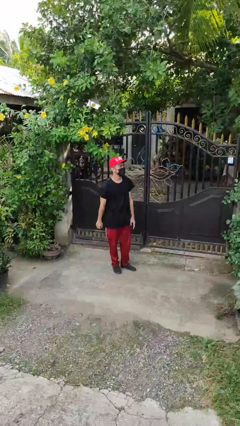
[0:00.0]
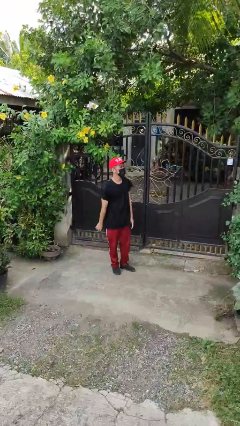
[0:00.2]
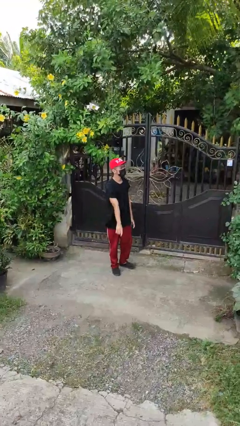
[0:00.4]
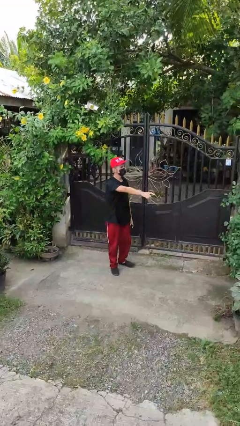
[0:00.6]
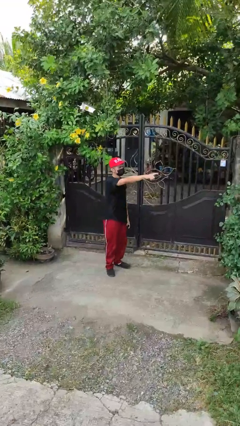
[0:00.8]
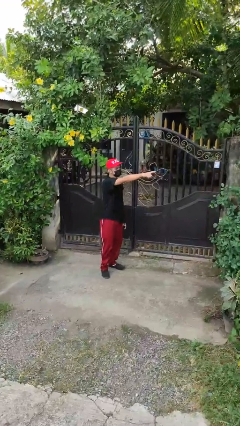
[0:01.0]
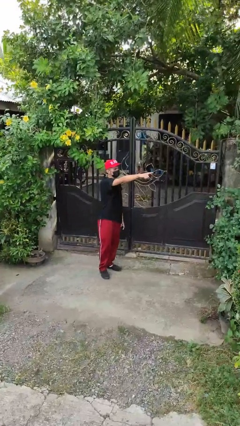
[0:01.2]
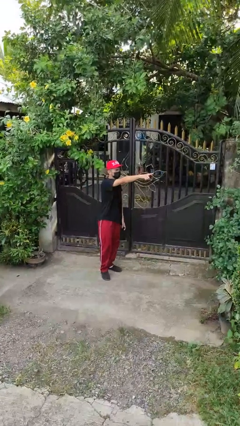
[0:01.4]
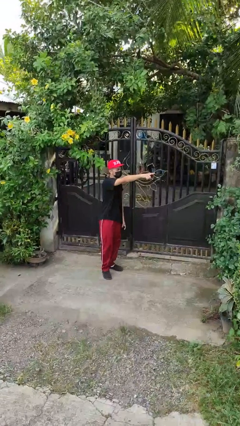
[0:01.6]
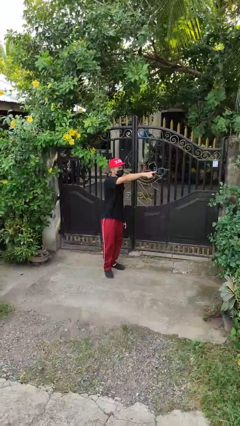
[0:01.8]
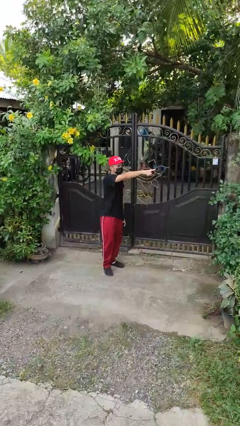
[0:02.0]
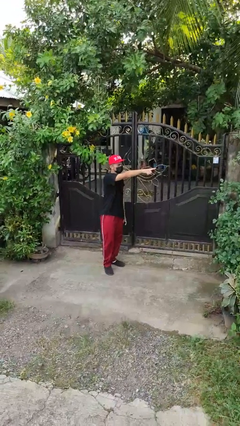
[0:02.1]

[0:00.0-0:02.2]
person points at person

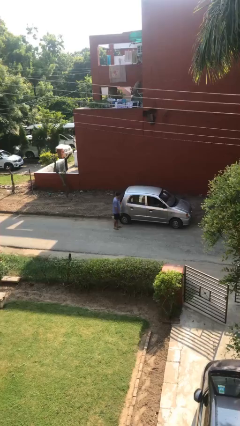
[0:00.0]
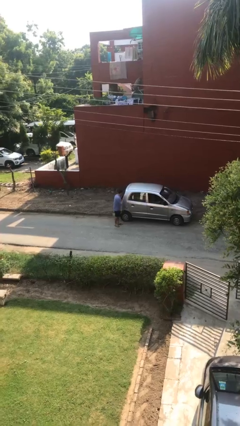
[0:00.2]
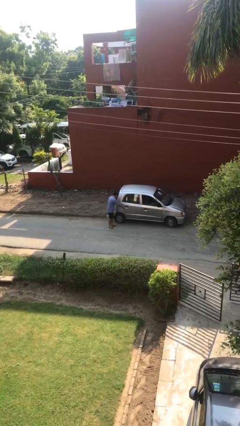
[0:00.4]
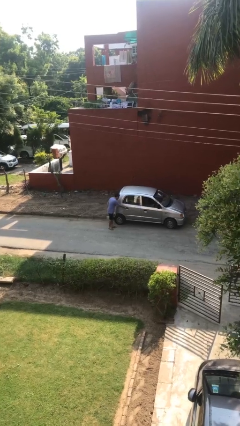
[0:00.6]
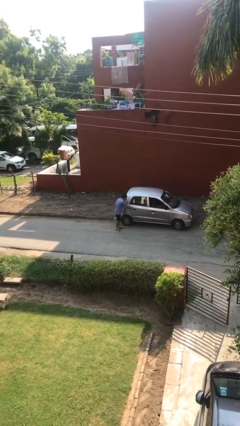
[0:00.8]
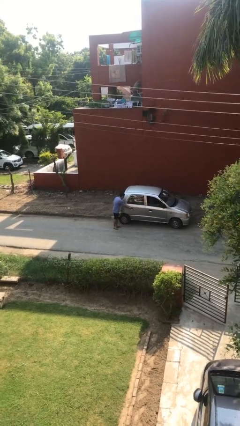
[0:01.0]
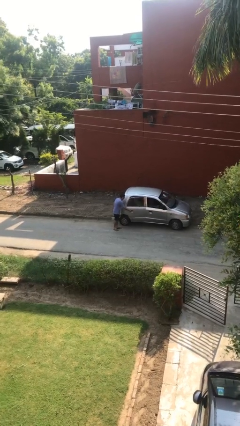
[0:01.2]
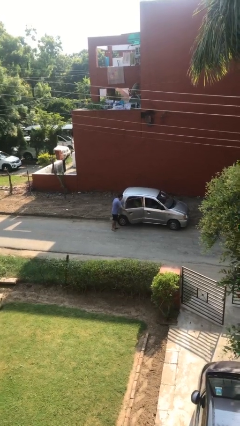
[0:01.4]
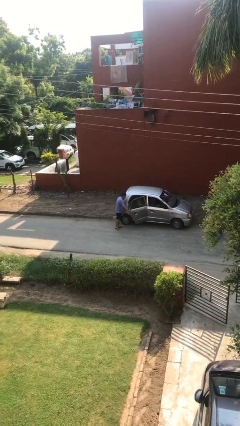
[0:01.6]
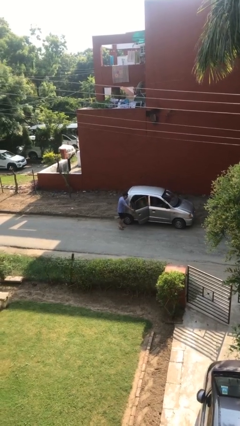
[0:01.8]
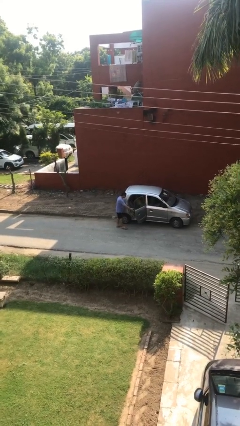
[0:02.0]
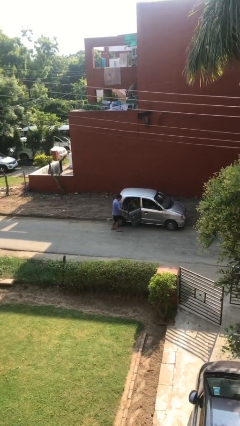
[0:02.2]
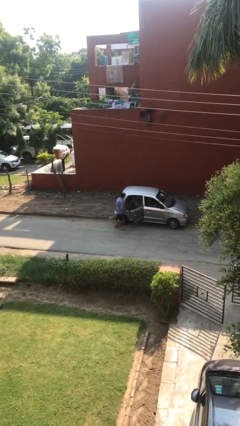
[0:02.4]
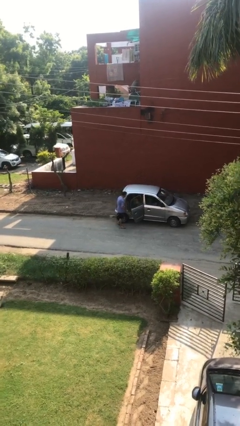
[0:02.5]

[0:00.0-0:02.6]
person opens car door

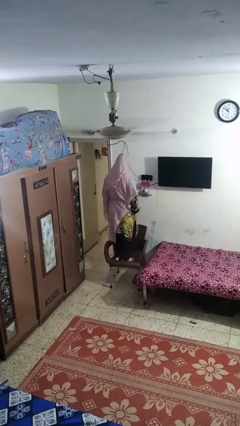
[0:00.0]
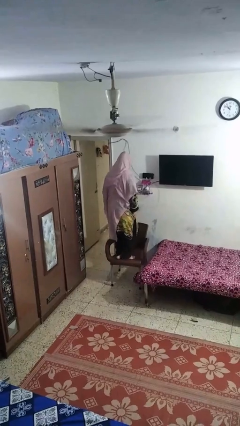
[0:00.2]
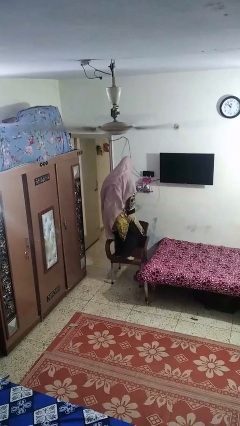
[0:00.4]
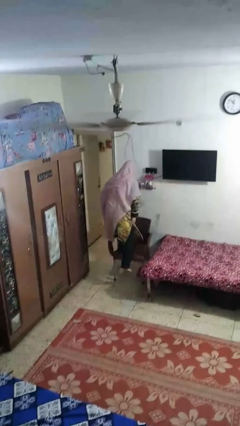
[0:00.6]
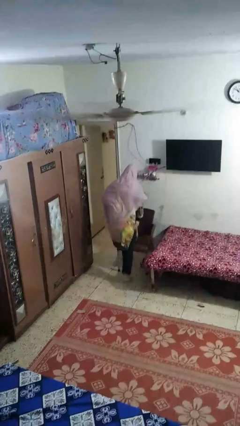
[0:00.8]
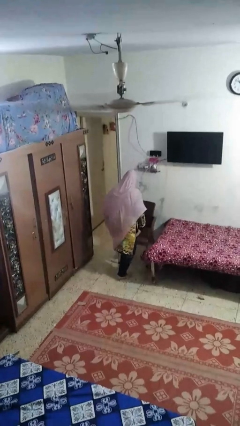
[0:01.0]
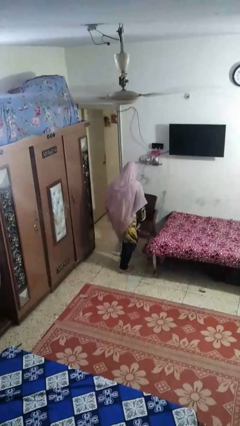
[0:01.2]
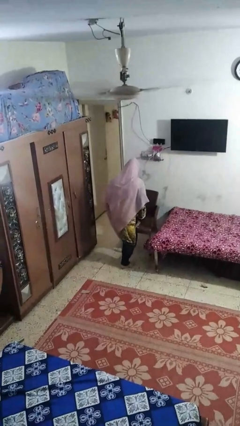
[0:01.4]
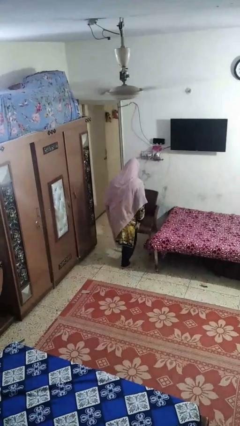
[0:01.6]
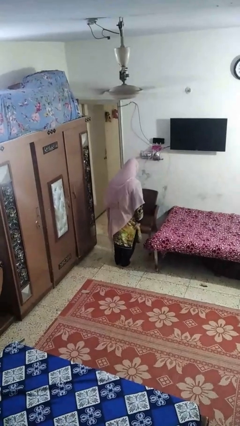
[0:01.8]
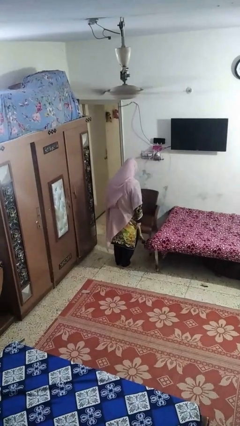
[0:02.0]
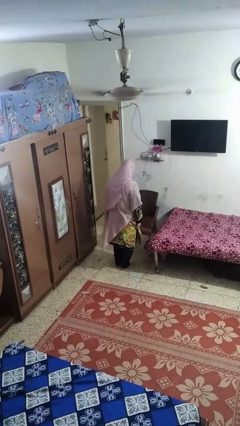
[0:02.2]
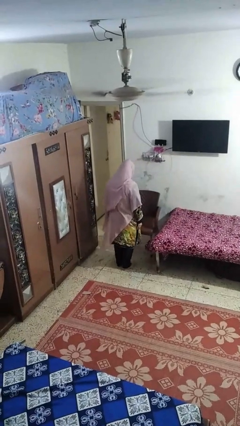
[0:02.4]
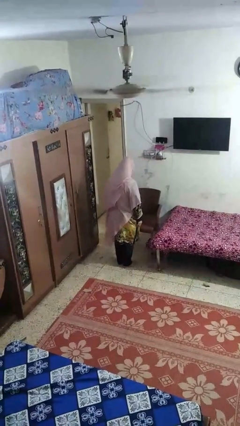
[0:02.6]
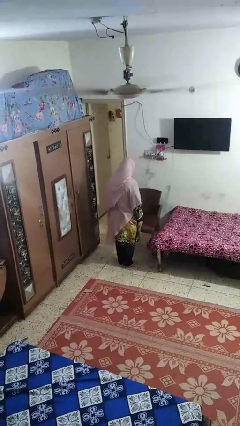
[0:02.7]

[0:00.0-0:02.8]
person climbs off chair

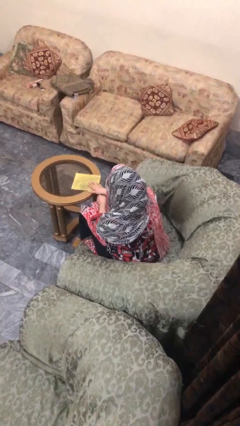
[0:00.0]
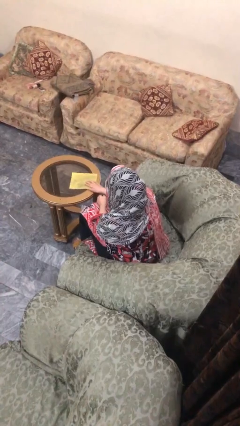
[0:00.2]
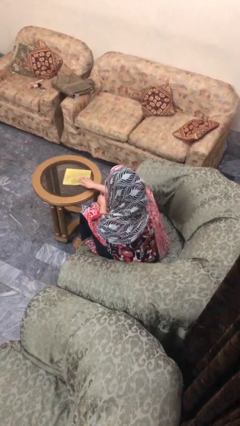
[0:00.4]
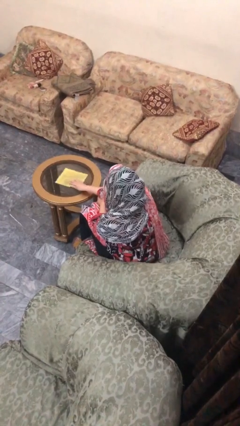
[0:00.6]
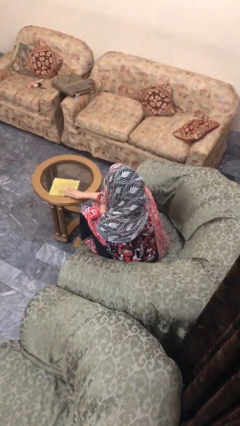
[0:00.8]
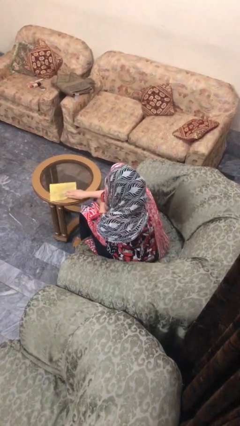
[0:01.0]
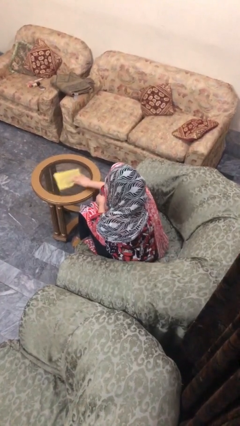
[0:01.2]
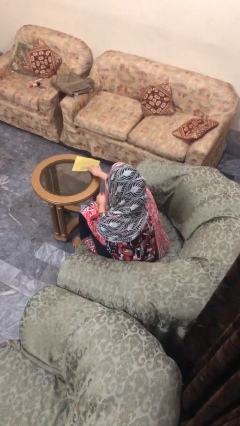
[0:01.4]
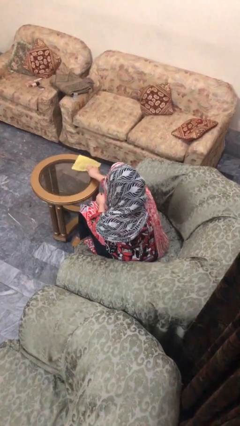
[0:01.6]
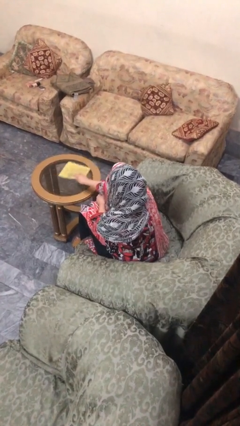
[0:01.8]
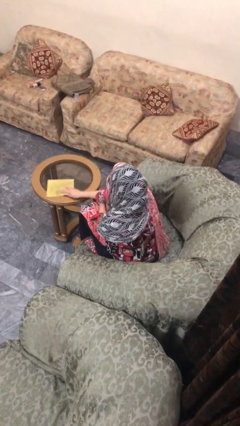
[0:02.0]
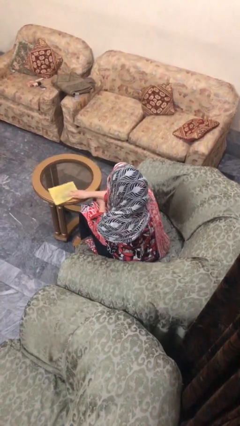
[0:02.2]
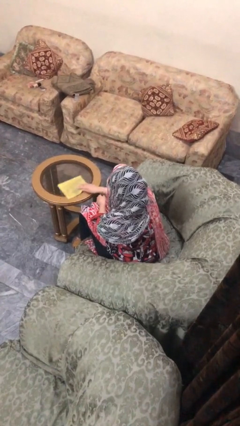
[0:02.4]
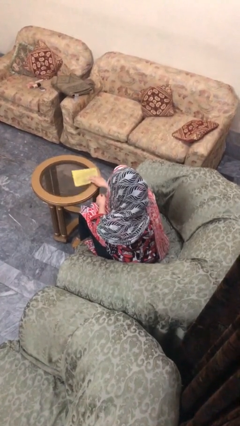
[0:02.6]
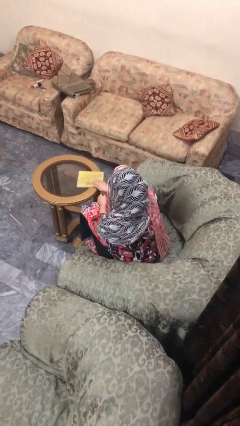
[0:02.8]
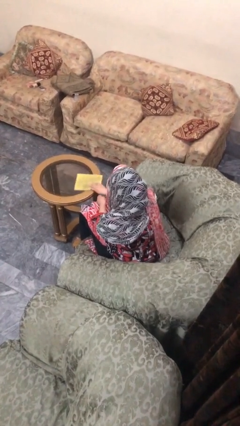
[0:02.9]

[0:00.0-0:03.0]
person cleans table with rag

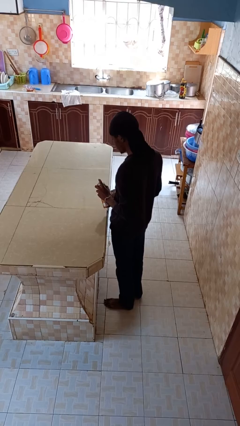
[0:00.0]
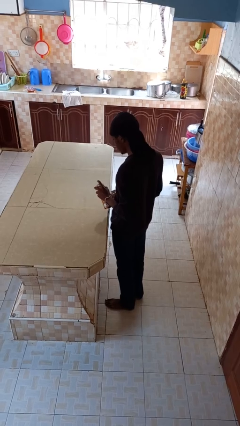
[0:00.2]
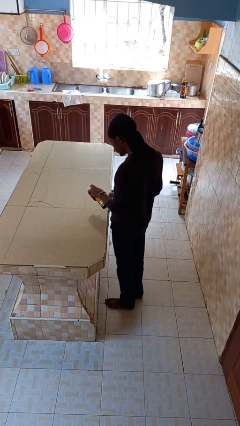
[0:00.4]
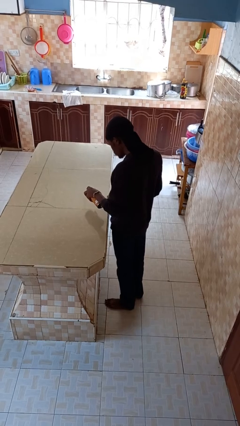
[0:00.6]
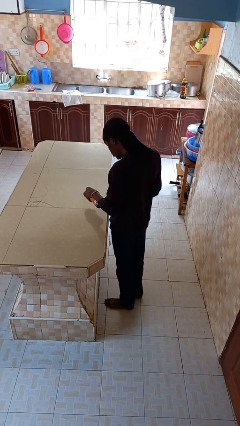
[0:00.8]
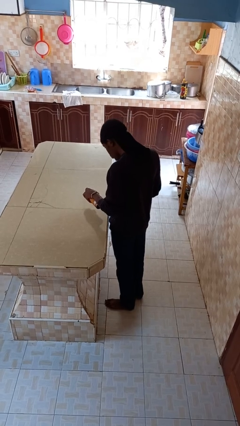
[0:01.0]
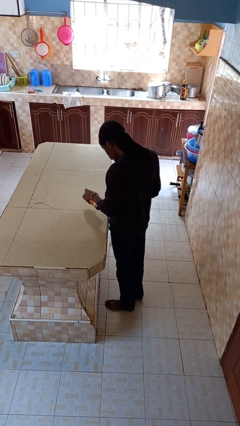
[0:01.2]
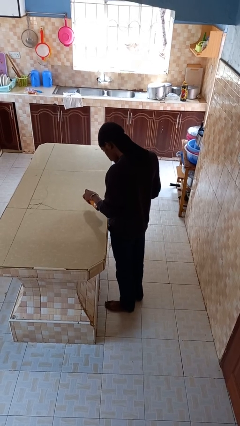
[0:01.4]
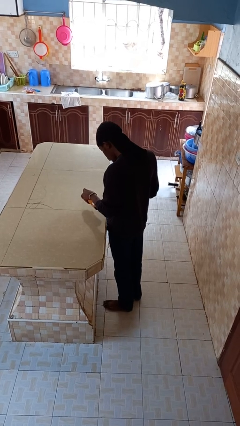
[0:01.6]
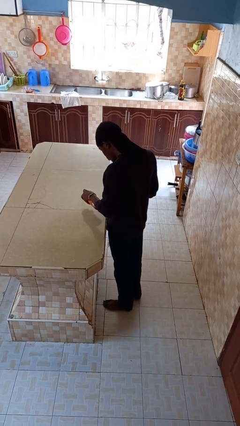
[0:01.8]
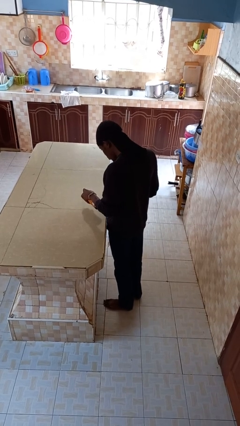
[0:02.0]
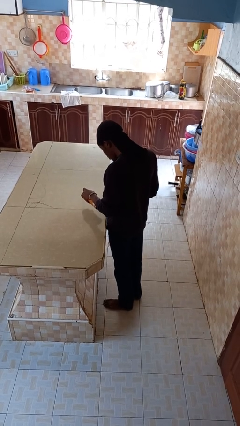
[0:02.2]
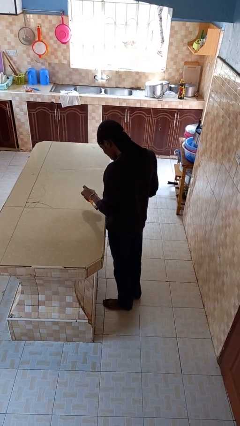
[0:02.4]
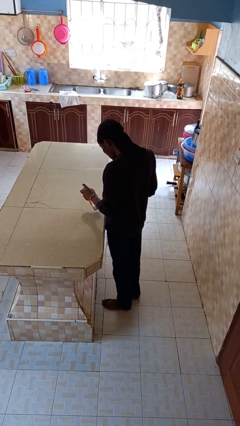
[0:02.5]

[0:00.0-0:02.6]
person sprays from bottle

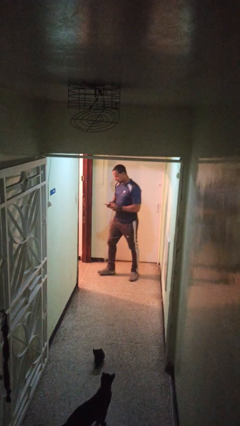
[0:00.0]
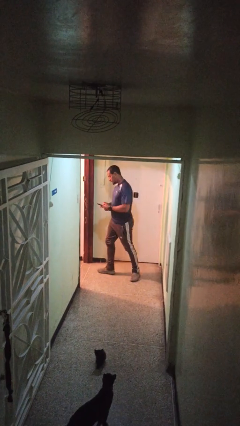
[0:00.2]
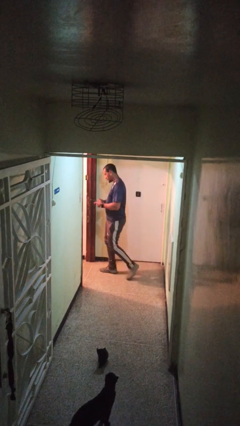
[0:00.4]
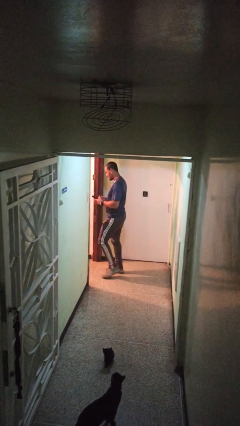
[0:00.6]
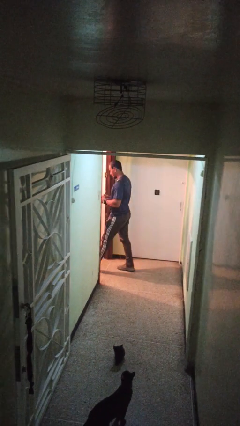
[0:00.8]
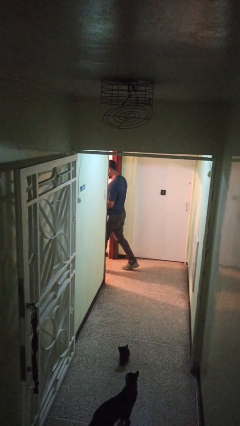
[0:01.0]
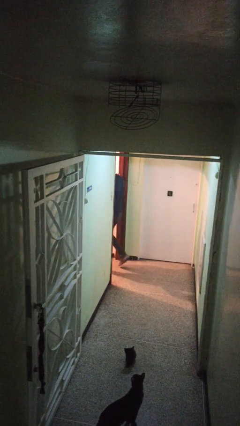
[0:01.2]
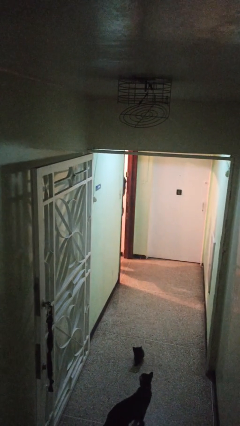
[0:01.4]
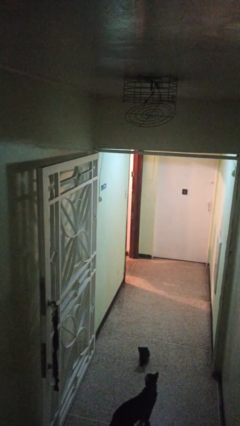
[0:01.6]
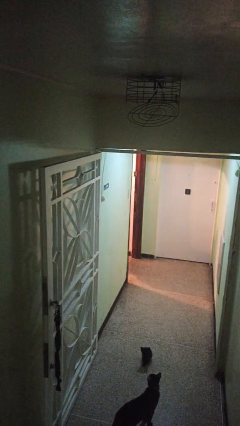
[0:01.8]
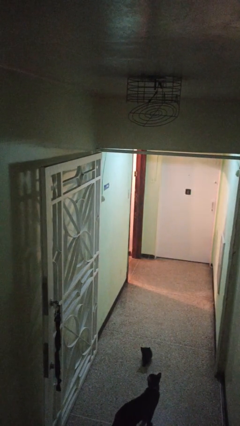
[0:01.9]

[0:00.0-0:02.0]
person exits scene through structure

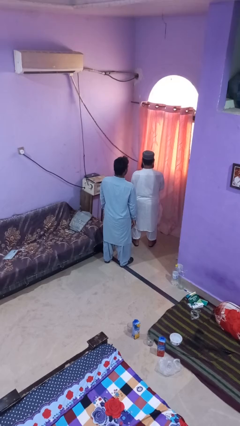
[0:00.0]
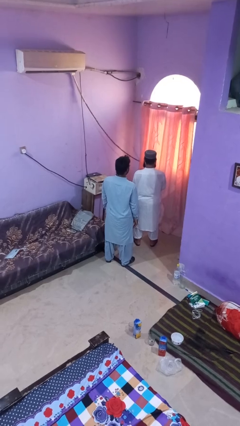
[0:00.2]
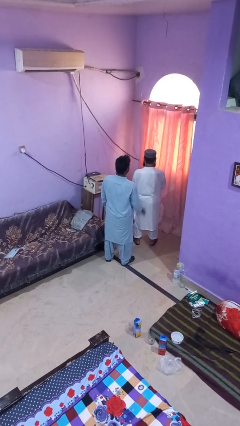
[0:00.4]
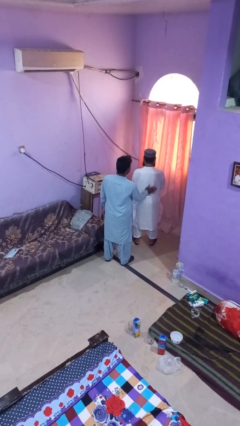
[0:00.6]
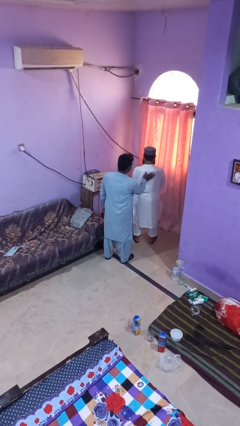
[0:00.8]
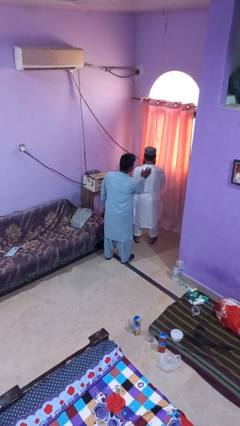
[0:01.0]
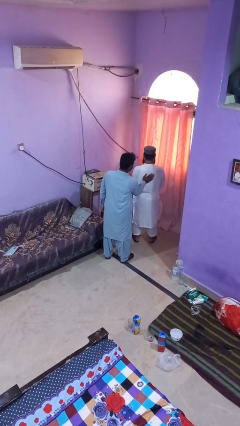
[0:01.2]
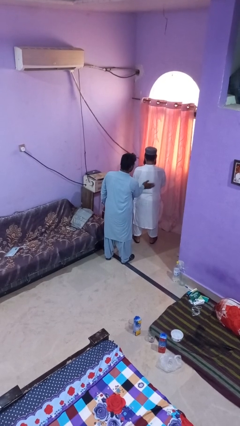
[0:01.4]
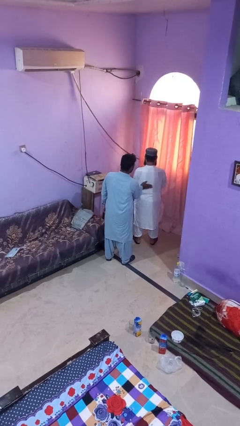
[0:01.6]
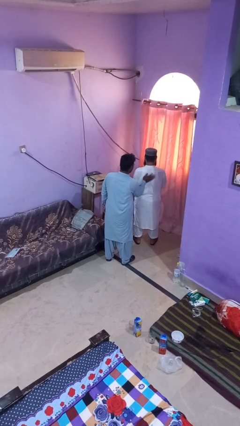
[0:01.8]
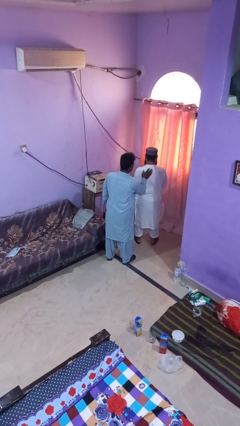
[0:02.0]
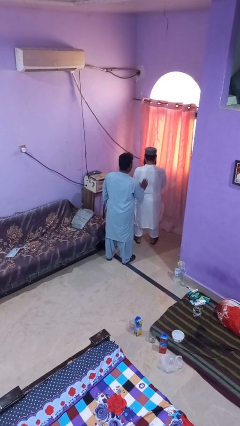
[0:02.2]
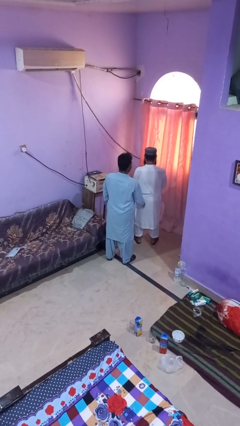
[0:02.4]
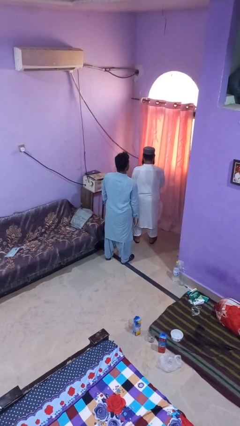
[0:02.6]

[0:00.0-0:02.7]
person touches back of person
